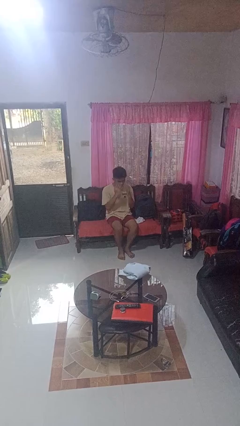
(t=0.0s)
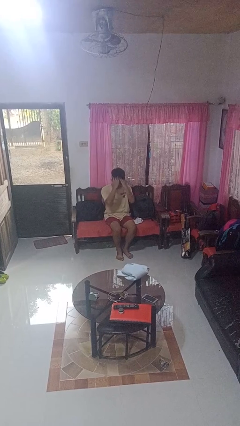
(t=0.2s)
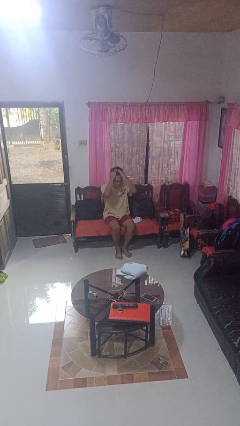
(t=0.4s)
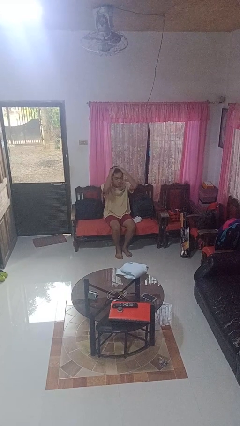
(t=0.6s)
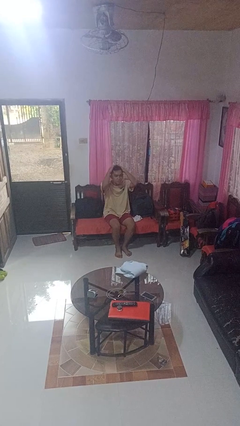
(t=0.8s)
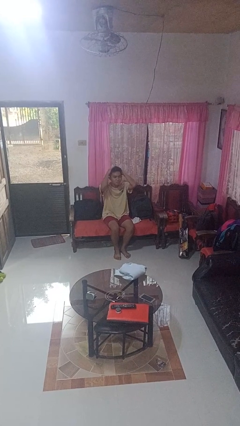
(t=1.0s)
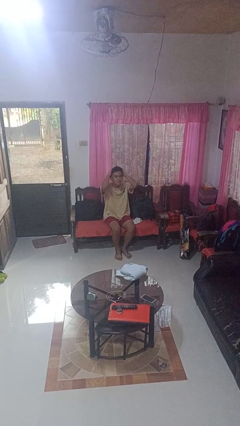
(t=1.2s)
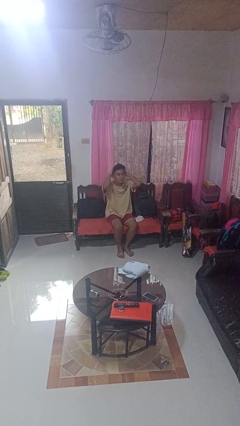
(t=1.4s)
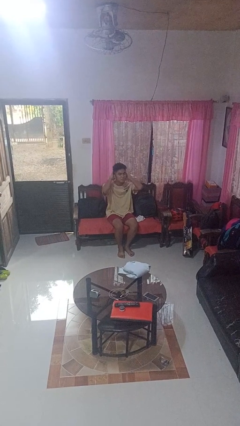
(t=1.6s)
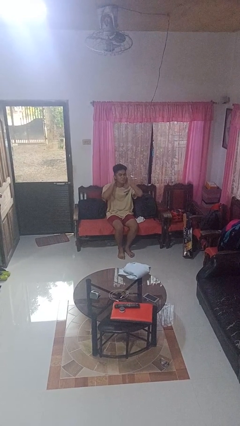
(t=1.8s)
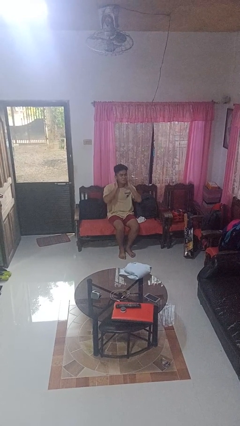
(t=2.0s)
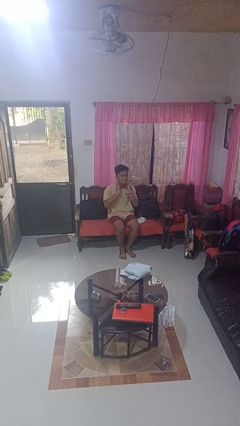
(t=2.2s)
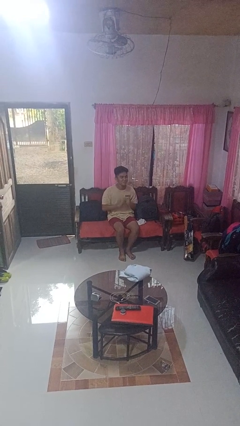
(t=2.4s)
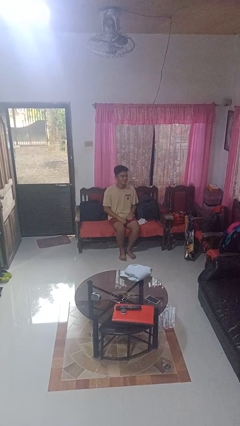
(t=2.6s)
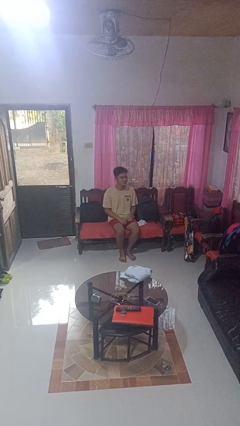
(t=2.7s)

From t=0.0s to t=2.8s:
person strokes hair

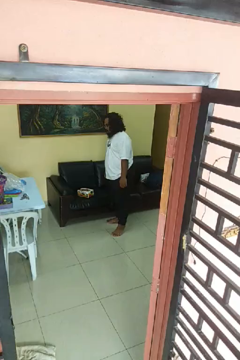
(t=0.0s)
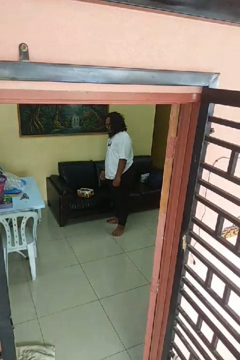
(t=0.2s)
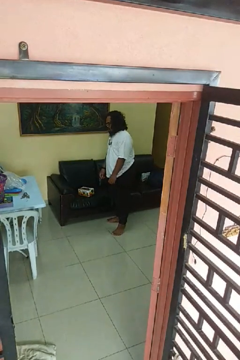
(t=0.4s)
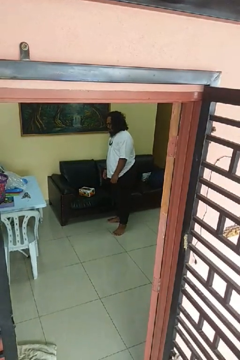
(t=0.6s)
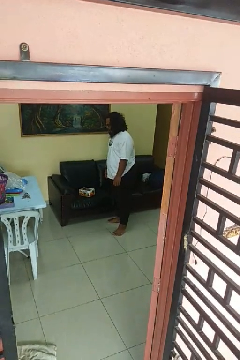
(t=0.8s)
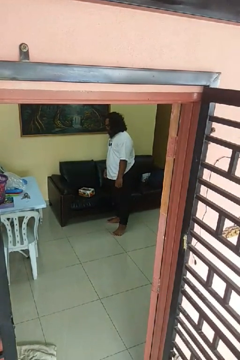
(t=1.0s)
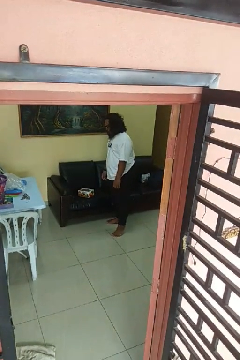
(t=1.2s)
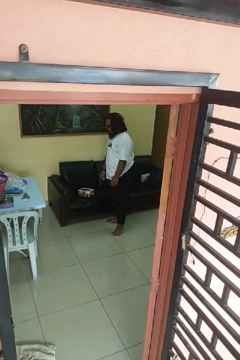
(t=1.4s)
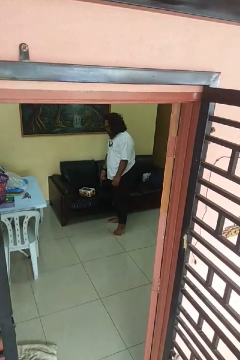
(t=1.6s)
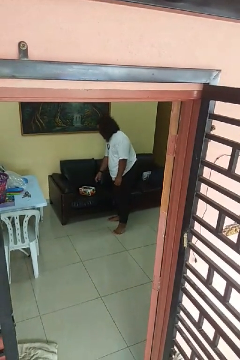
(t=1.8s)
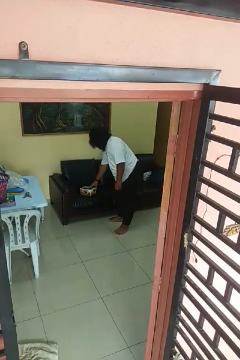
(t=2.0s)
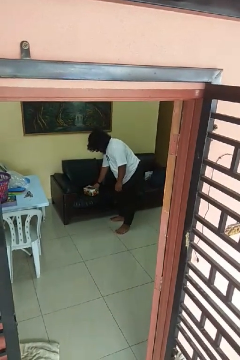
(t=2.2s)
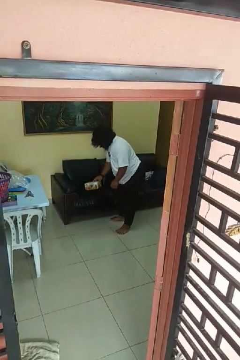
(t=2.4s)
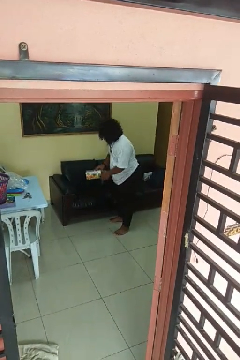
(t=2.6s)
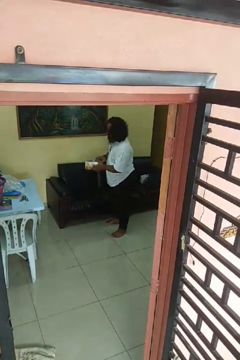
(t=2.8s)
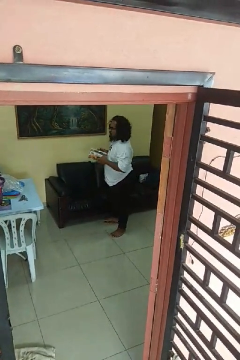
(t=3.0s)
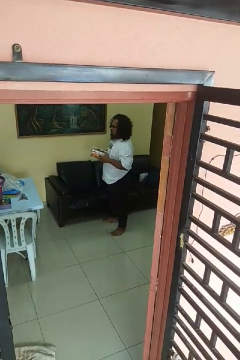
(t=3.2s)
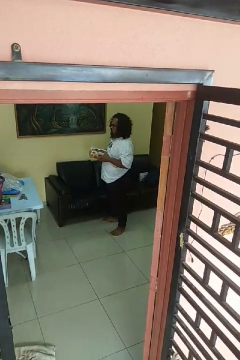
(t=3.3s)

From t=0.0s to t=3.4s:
person picks up object from couch

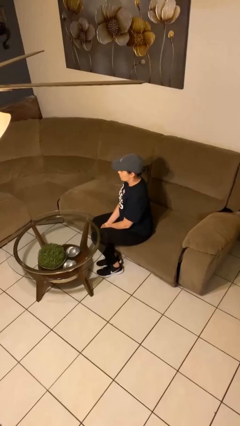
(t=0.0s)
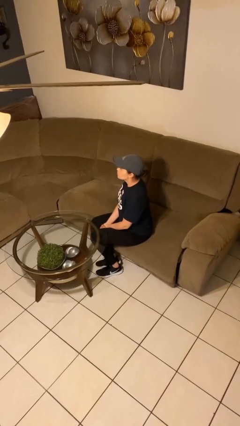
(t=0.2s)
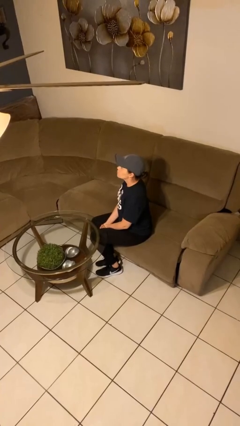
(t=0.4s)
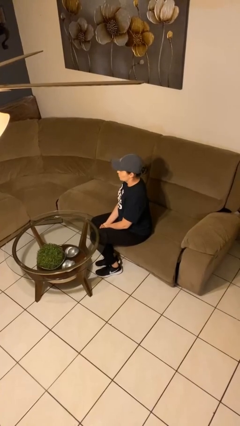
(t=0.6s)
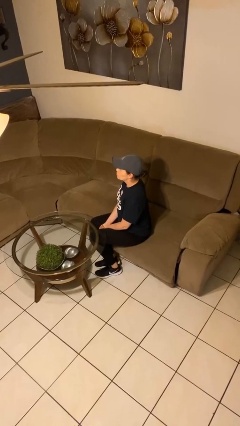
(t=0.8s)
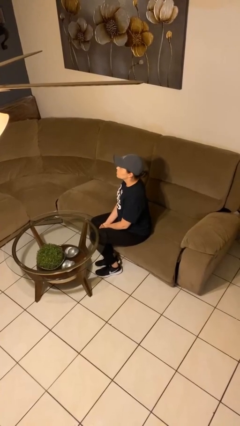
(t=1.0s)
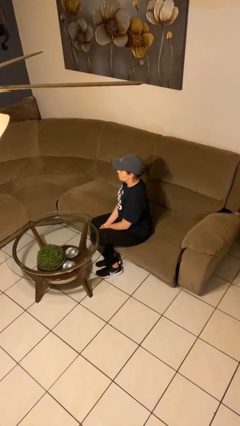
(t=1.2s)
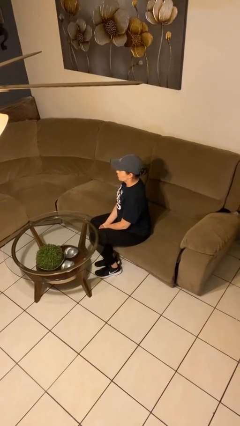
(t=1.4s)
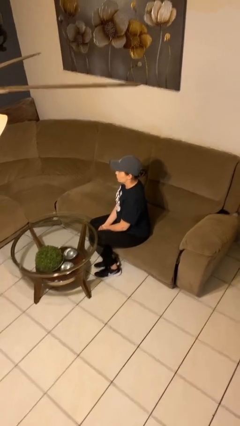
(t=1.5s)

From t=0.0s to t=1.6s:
person nods head

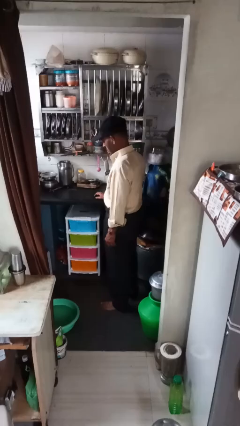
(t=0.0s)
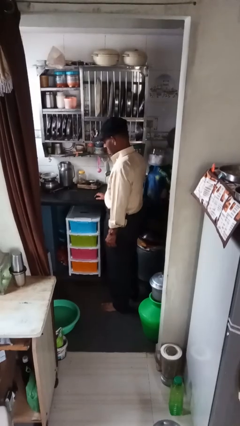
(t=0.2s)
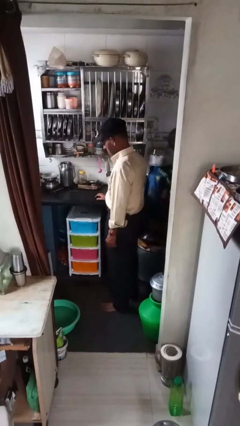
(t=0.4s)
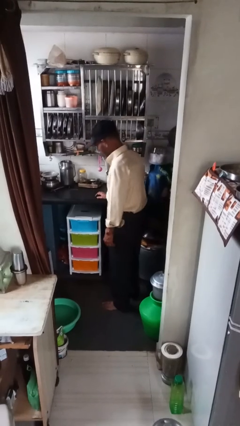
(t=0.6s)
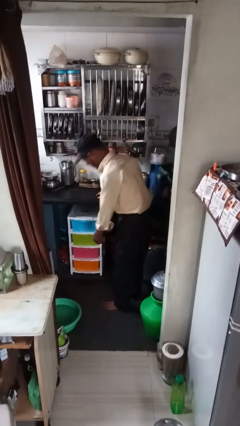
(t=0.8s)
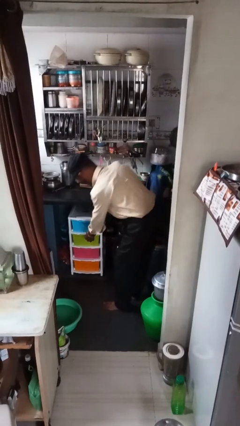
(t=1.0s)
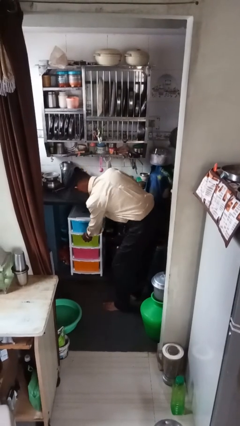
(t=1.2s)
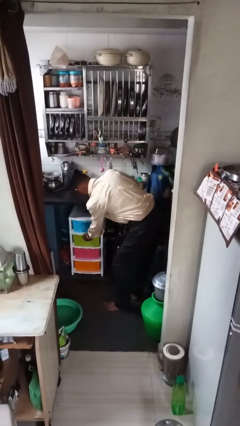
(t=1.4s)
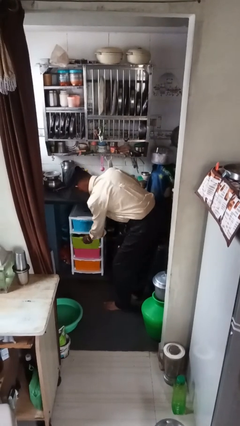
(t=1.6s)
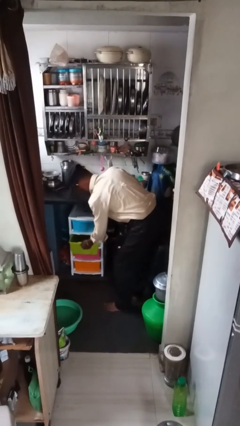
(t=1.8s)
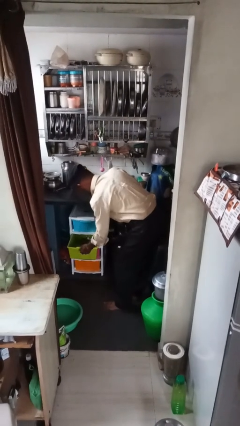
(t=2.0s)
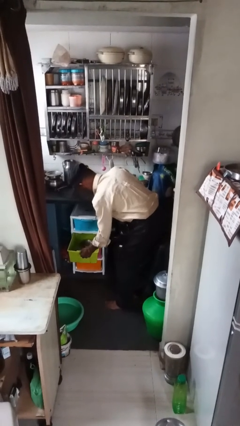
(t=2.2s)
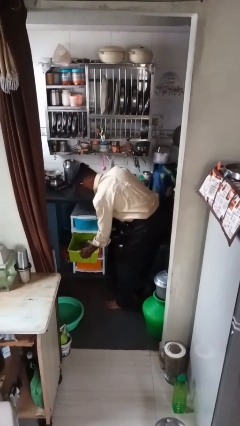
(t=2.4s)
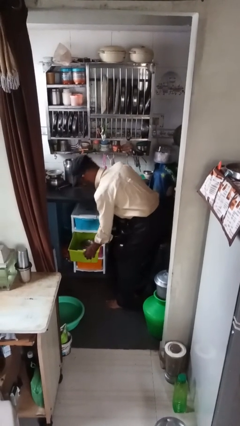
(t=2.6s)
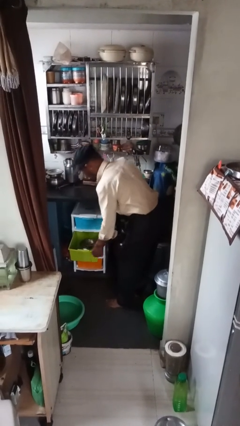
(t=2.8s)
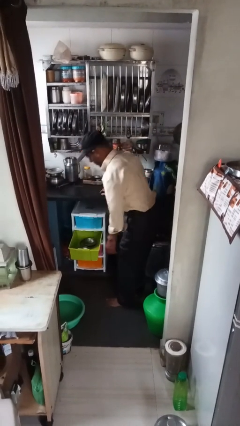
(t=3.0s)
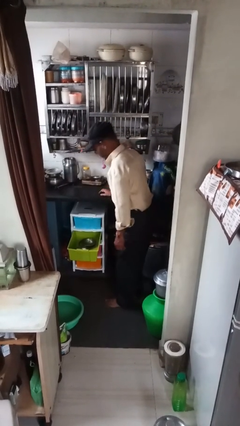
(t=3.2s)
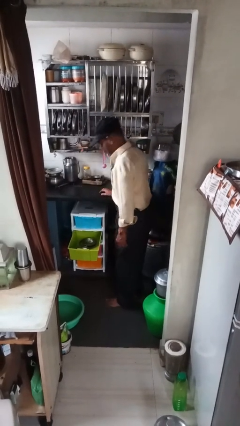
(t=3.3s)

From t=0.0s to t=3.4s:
person opens kitchen drawer

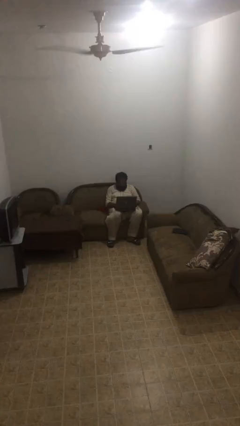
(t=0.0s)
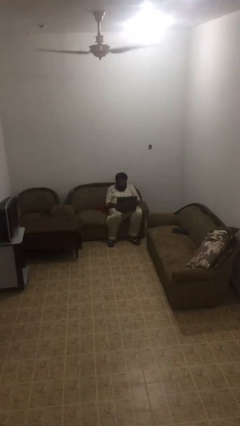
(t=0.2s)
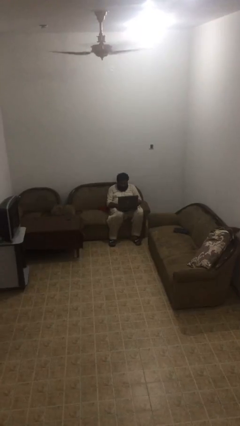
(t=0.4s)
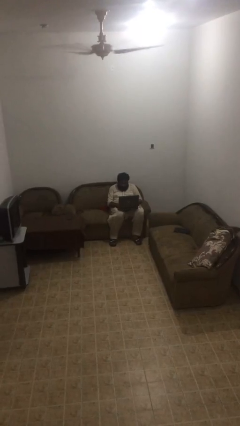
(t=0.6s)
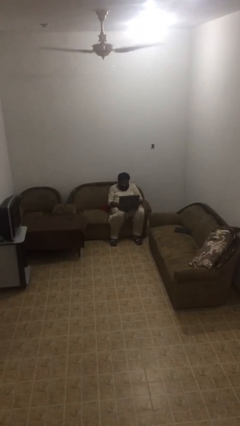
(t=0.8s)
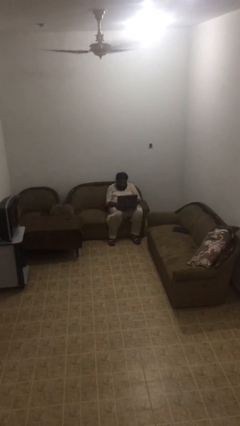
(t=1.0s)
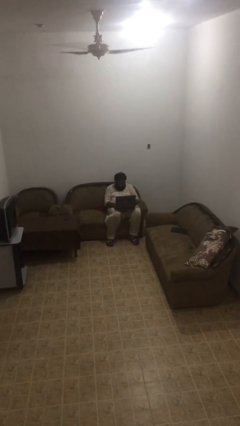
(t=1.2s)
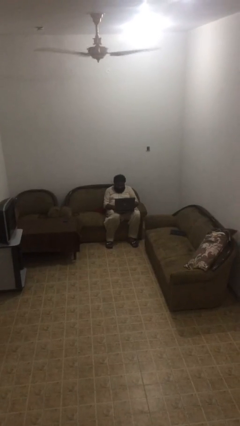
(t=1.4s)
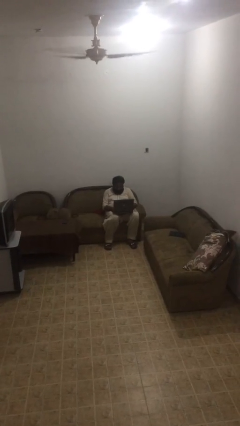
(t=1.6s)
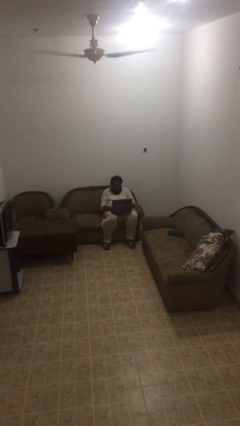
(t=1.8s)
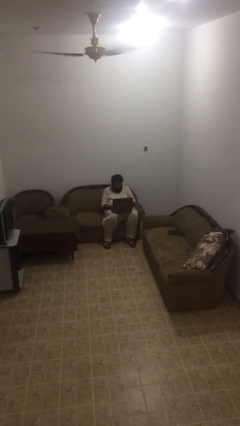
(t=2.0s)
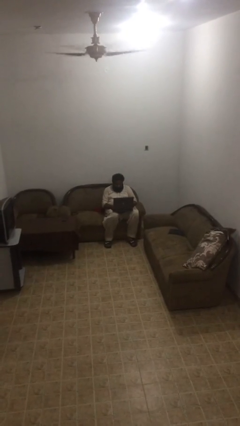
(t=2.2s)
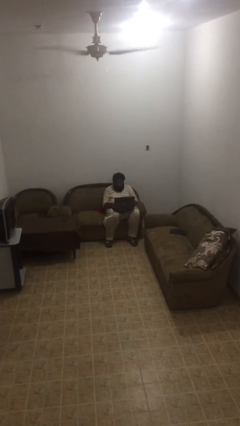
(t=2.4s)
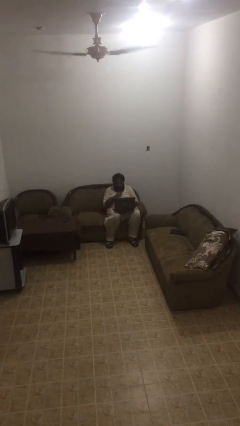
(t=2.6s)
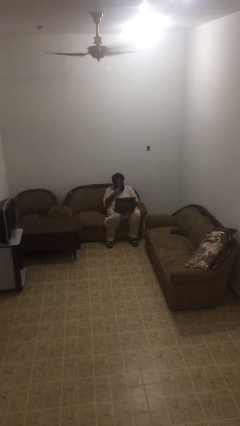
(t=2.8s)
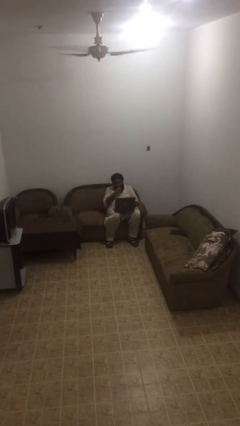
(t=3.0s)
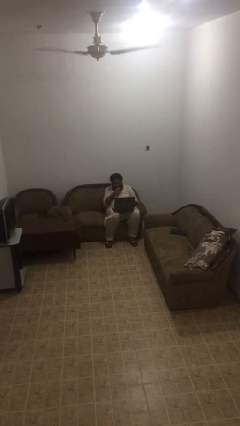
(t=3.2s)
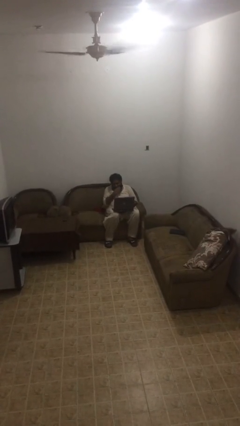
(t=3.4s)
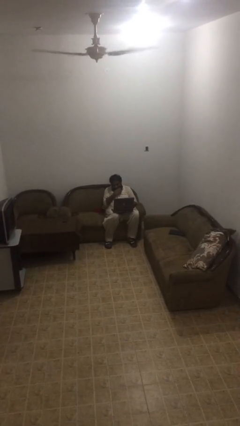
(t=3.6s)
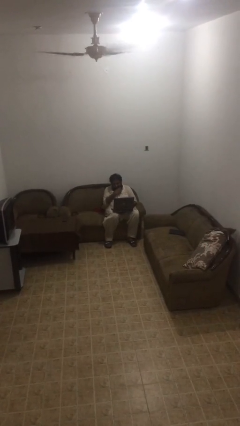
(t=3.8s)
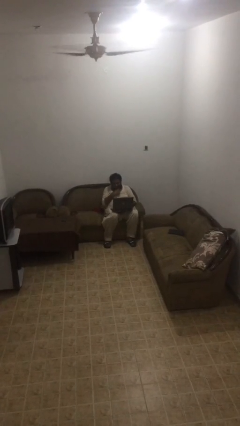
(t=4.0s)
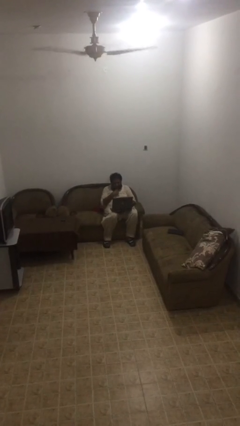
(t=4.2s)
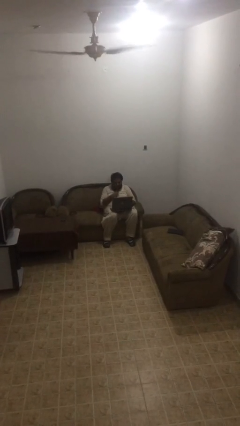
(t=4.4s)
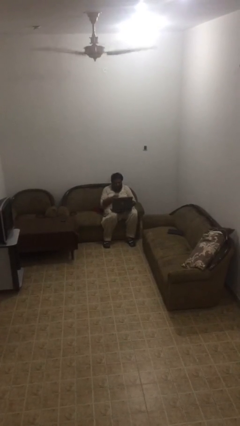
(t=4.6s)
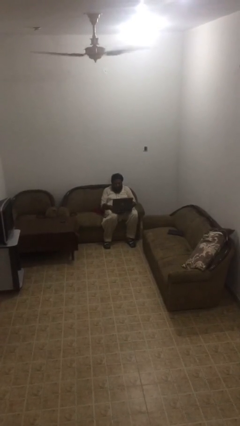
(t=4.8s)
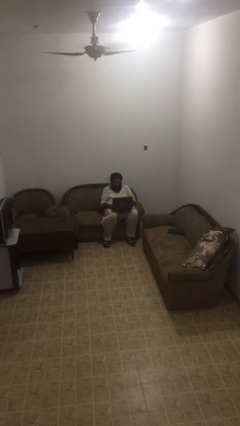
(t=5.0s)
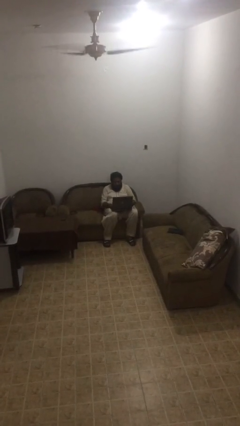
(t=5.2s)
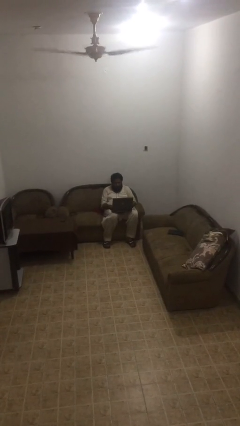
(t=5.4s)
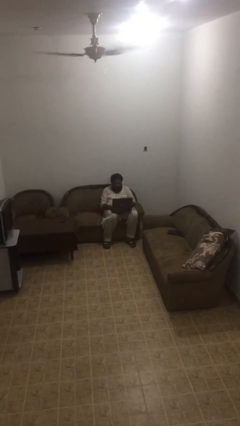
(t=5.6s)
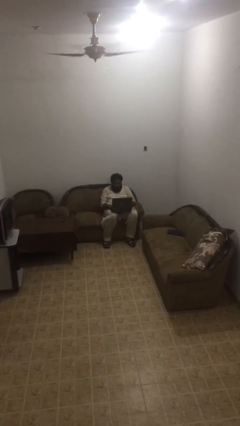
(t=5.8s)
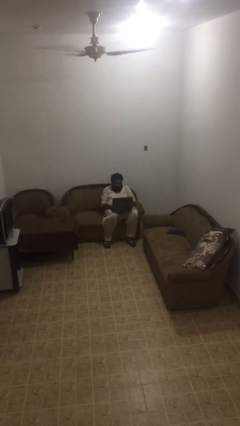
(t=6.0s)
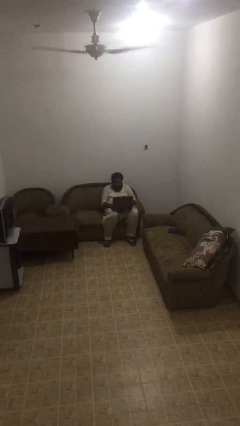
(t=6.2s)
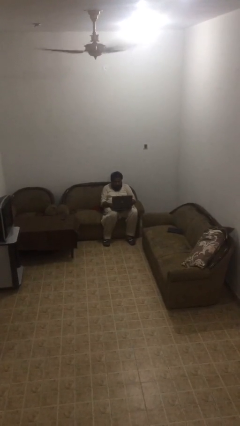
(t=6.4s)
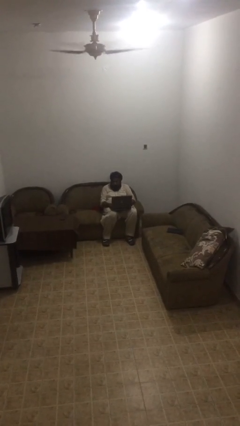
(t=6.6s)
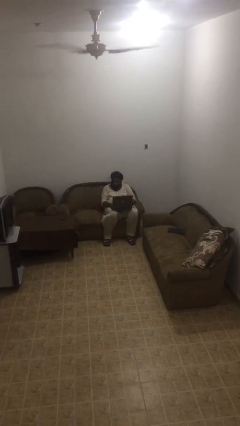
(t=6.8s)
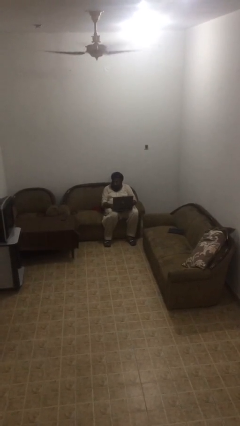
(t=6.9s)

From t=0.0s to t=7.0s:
person interacts with laptop
